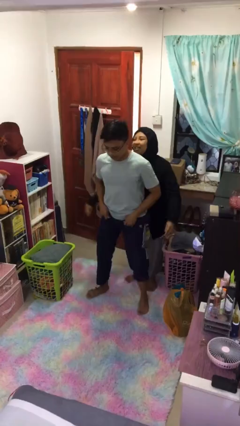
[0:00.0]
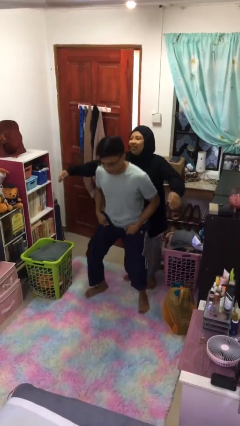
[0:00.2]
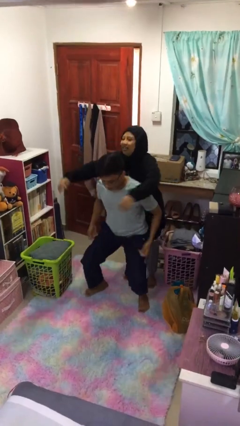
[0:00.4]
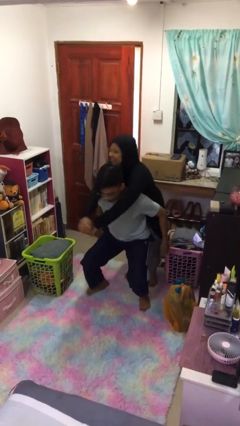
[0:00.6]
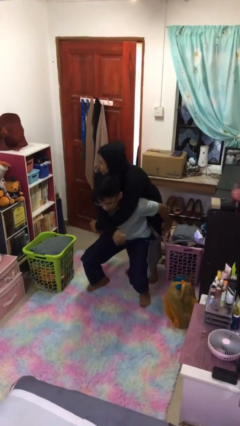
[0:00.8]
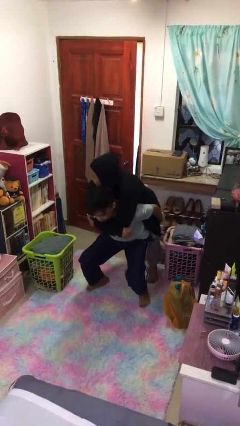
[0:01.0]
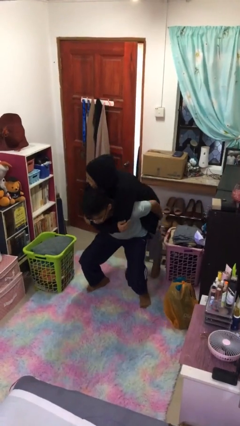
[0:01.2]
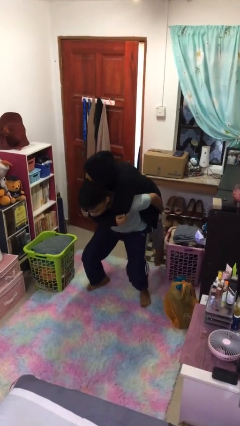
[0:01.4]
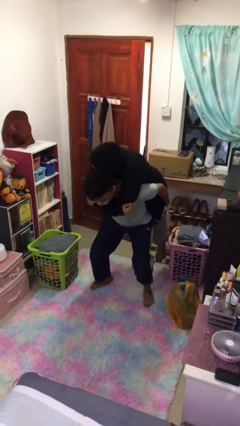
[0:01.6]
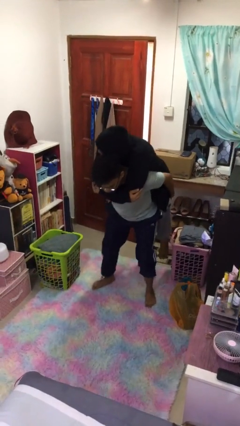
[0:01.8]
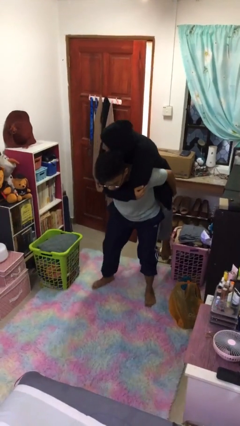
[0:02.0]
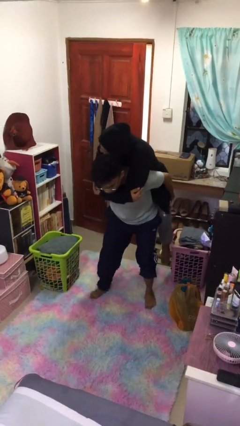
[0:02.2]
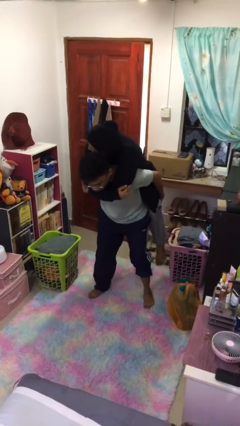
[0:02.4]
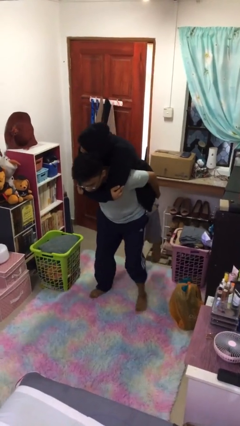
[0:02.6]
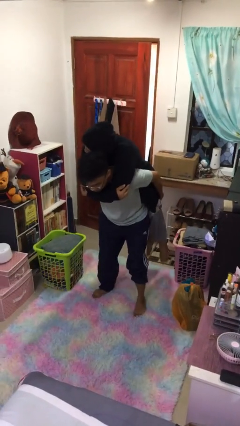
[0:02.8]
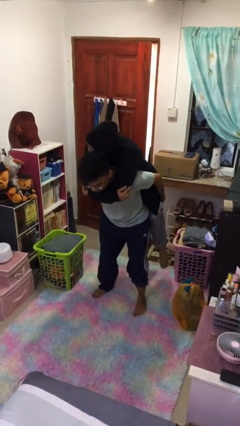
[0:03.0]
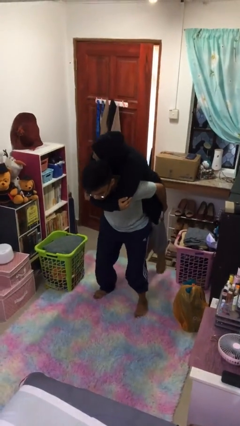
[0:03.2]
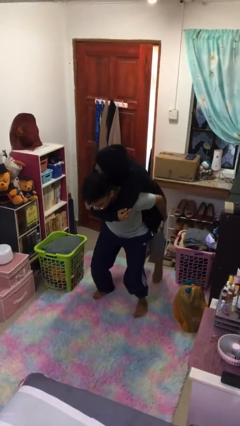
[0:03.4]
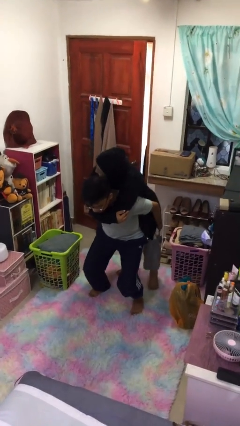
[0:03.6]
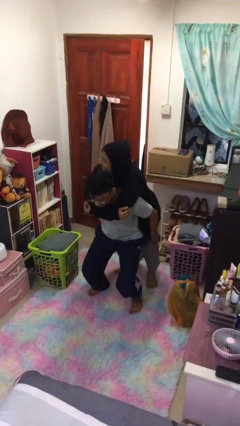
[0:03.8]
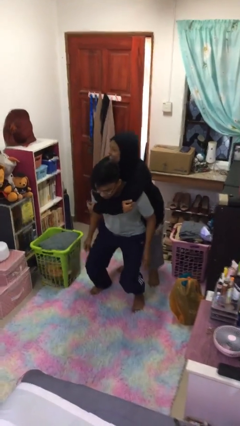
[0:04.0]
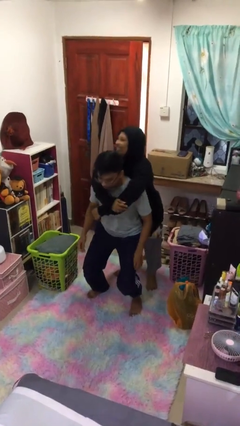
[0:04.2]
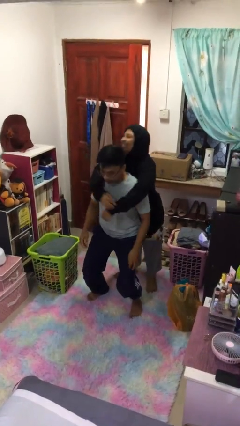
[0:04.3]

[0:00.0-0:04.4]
person carries person on back

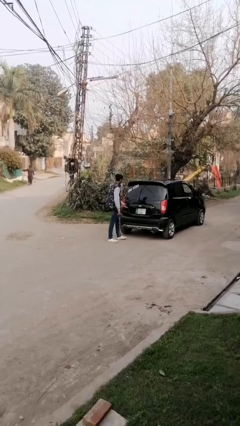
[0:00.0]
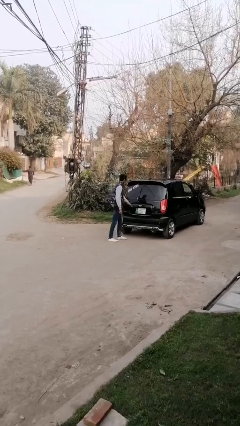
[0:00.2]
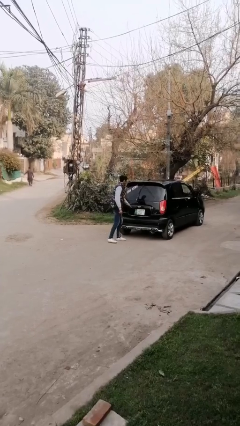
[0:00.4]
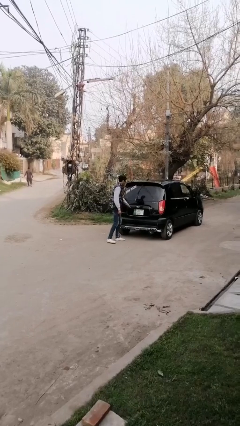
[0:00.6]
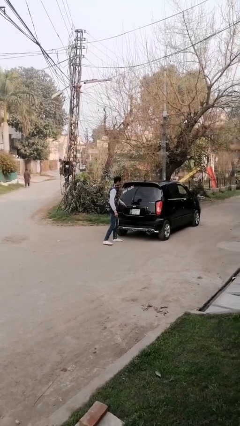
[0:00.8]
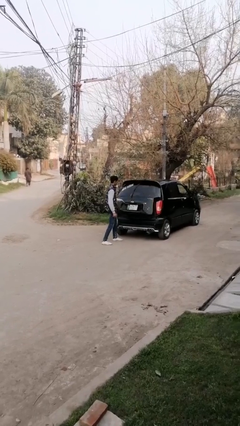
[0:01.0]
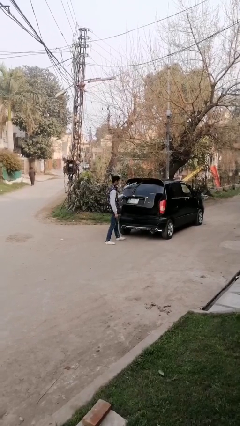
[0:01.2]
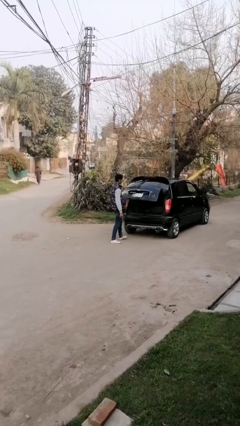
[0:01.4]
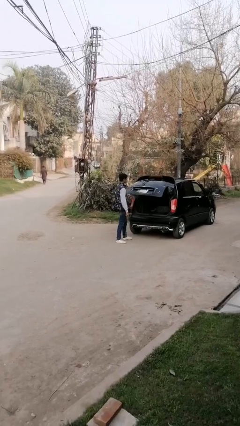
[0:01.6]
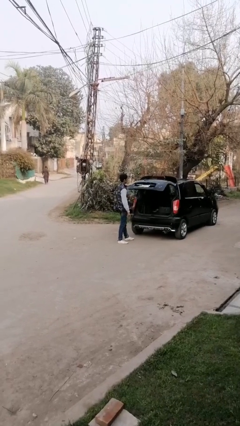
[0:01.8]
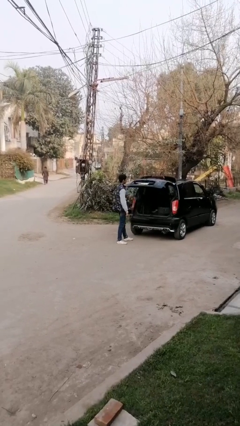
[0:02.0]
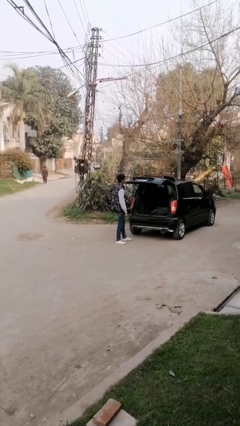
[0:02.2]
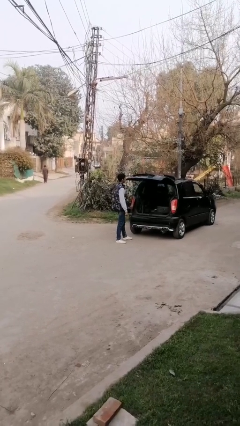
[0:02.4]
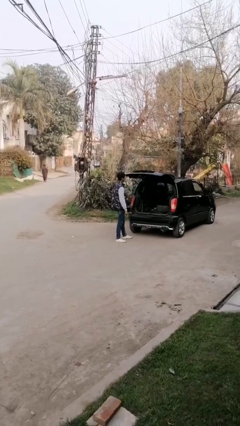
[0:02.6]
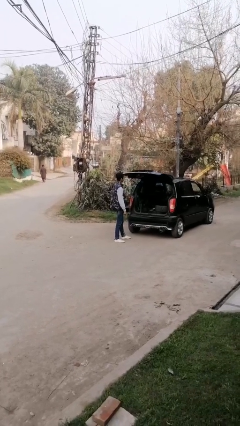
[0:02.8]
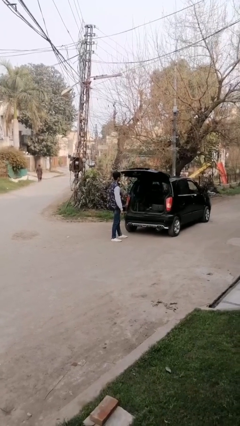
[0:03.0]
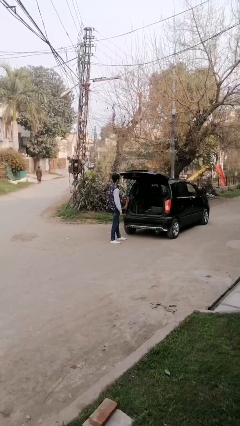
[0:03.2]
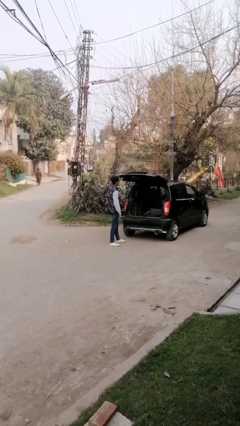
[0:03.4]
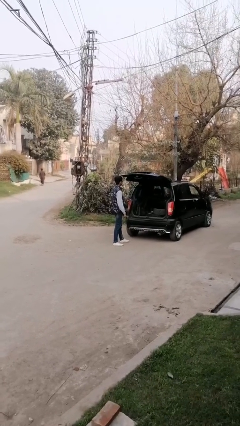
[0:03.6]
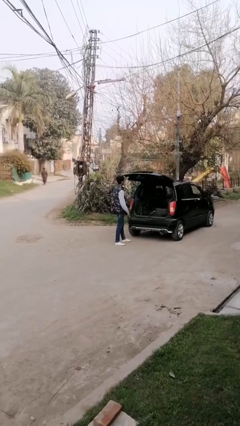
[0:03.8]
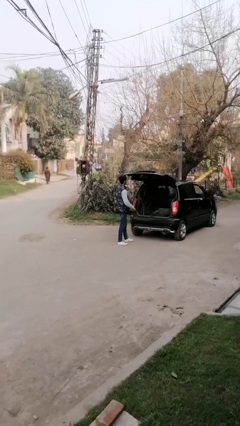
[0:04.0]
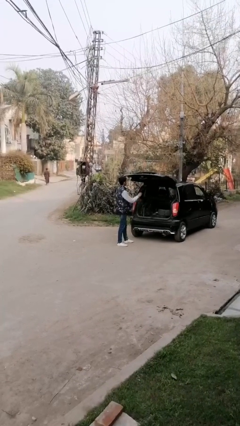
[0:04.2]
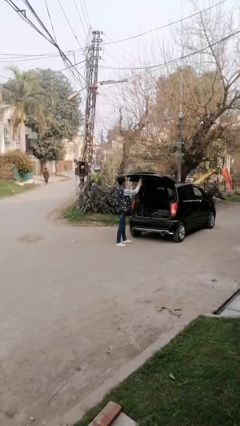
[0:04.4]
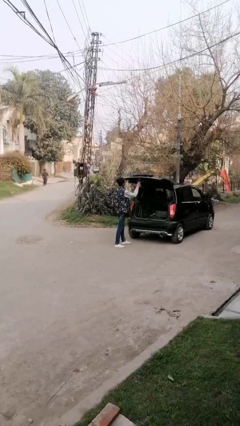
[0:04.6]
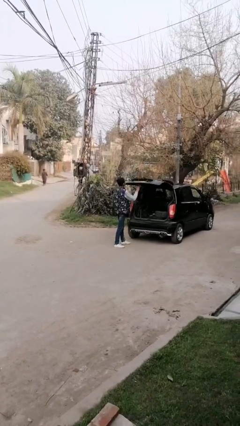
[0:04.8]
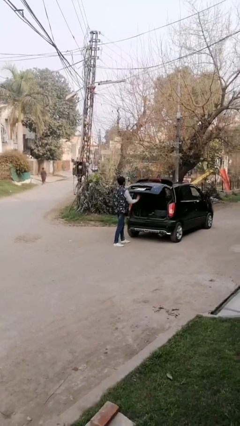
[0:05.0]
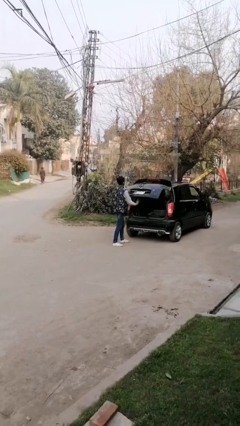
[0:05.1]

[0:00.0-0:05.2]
person opens car trunk

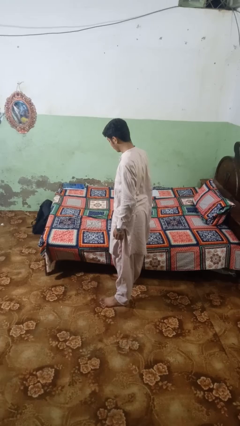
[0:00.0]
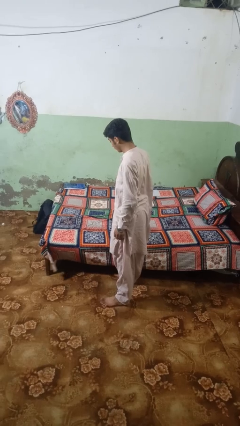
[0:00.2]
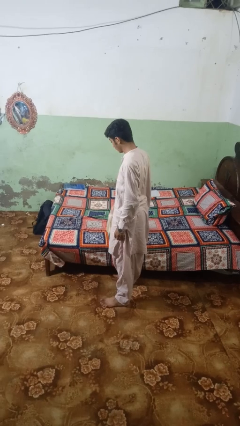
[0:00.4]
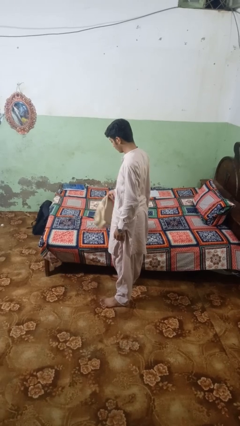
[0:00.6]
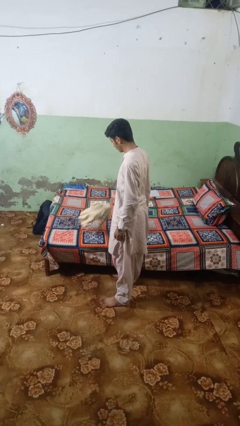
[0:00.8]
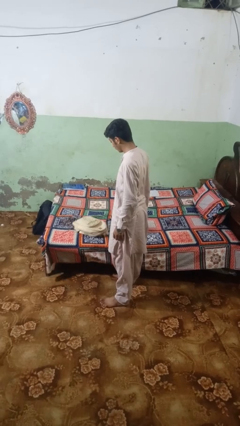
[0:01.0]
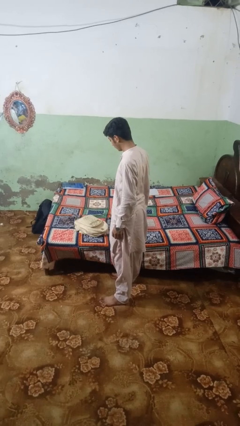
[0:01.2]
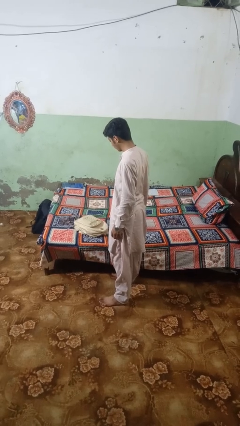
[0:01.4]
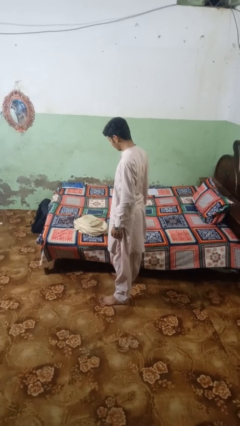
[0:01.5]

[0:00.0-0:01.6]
person puts down object on bed

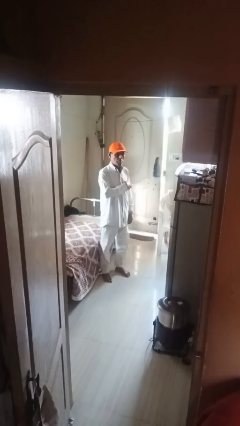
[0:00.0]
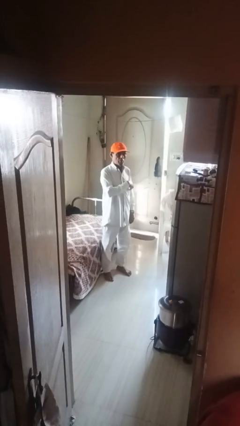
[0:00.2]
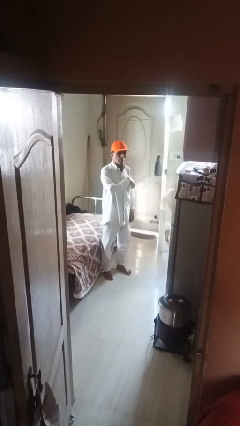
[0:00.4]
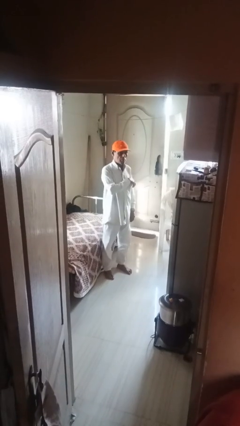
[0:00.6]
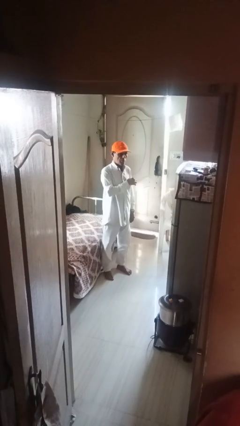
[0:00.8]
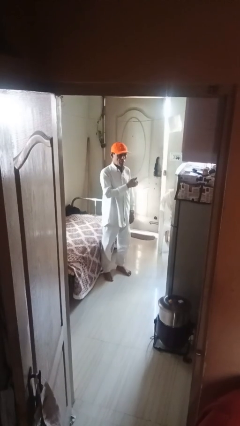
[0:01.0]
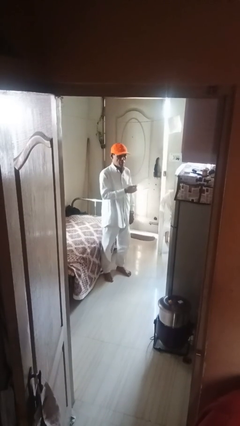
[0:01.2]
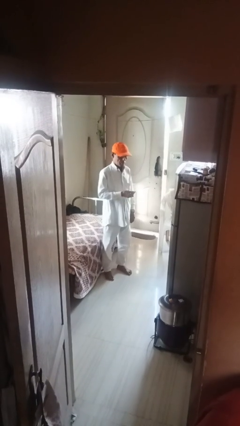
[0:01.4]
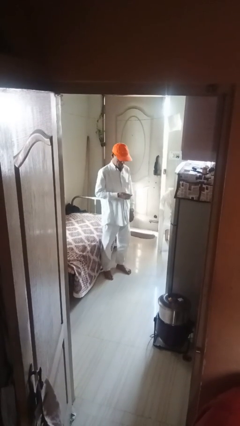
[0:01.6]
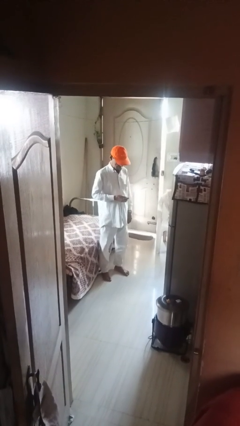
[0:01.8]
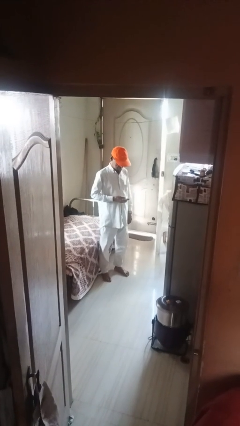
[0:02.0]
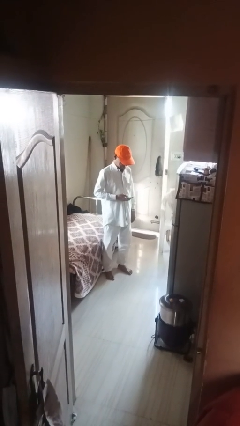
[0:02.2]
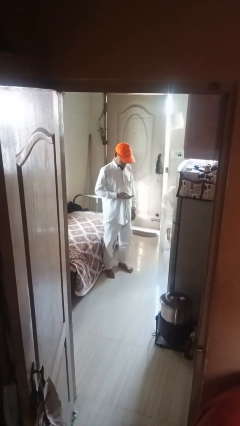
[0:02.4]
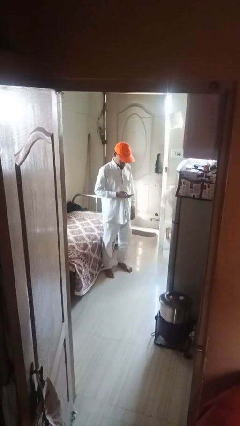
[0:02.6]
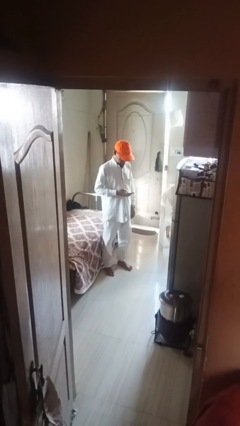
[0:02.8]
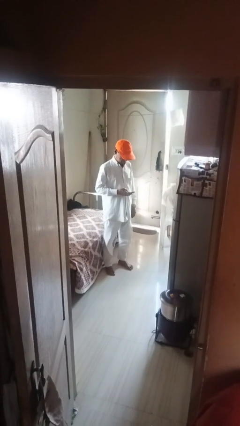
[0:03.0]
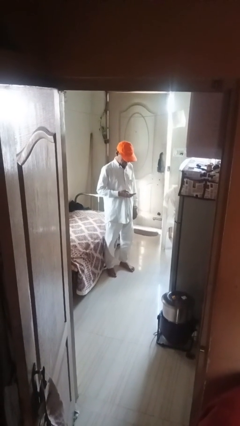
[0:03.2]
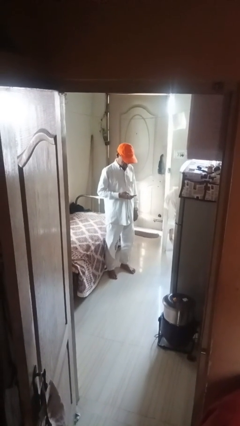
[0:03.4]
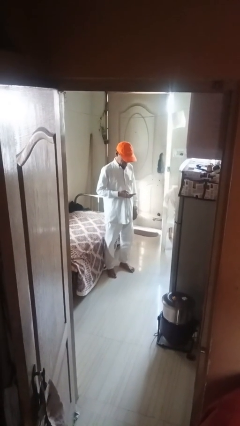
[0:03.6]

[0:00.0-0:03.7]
person takes phone from pocket

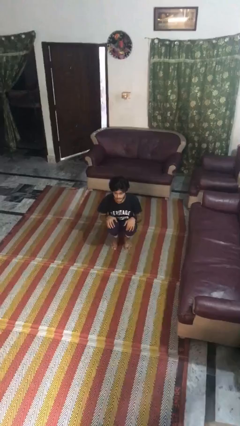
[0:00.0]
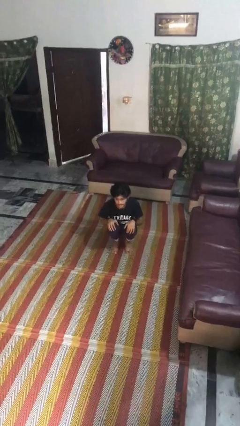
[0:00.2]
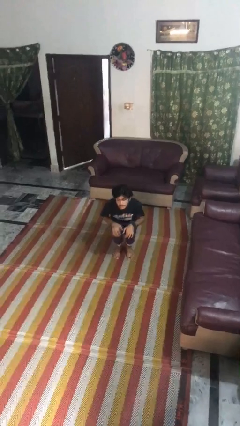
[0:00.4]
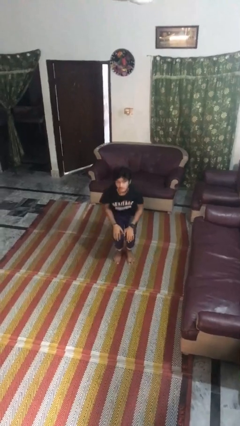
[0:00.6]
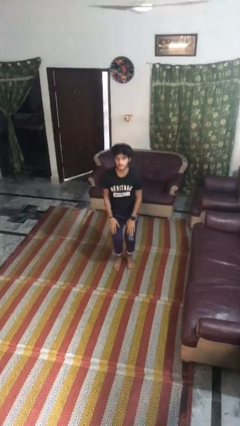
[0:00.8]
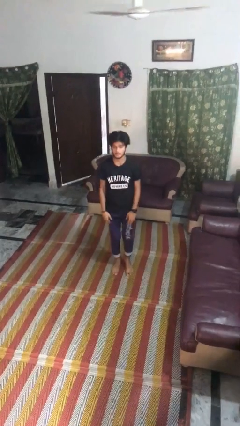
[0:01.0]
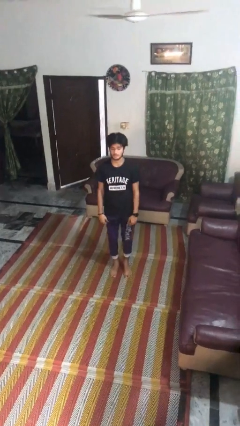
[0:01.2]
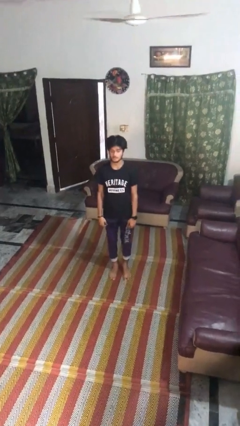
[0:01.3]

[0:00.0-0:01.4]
person stands up

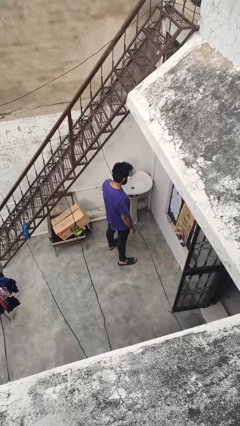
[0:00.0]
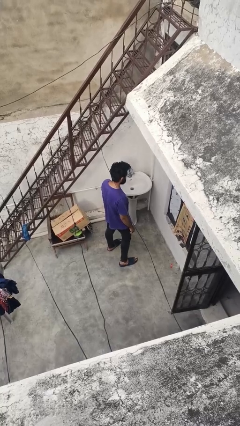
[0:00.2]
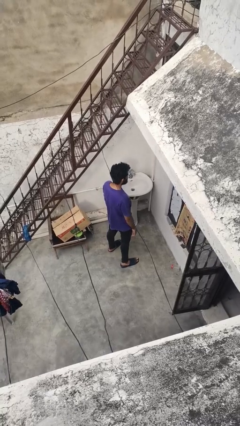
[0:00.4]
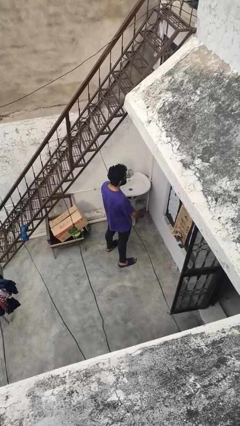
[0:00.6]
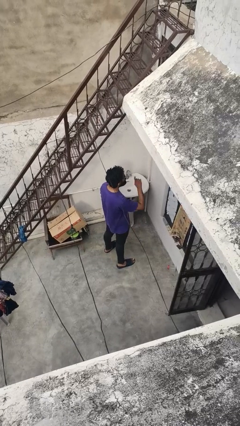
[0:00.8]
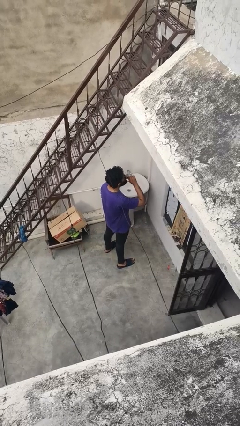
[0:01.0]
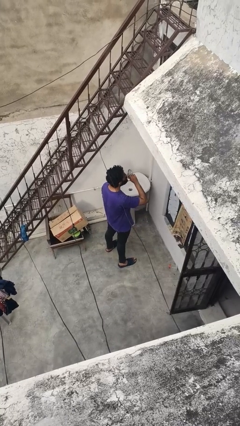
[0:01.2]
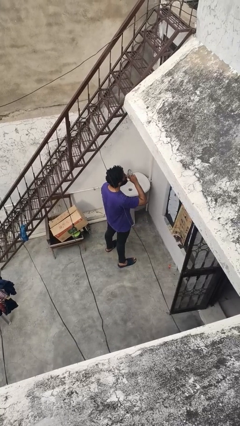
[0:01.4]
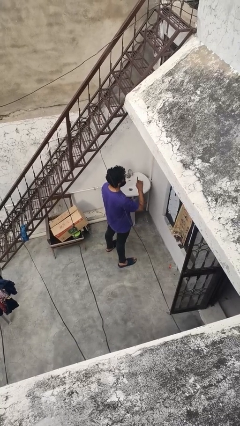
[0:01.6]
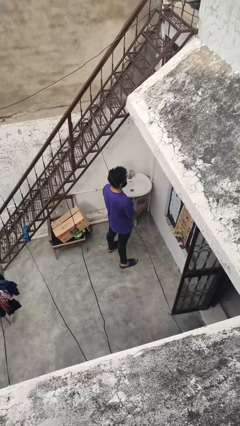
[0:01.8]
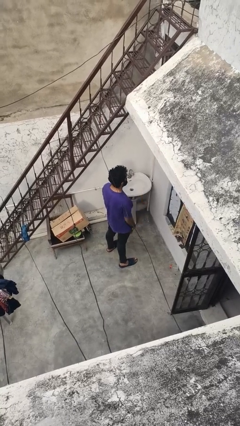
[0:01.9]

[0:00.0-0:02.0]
person gestures be quiet
